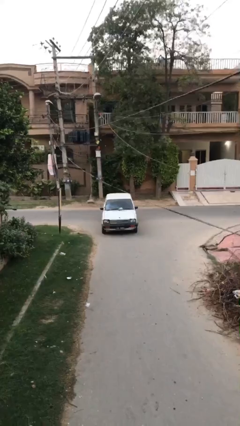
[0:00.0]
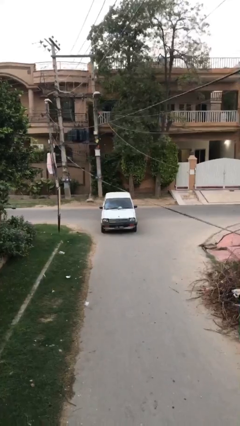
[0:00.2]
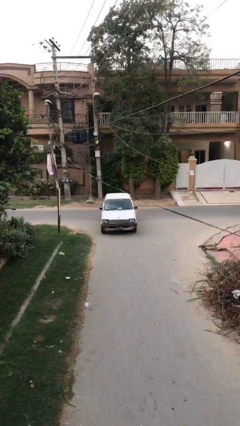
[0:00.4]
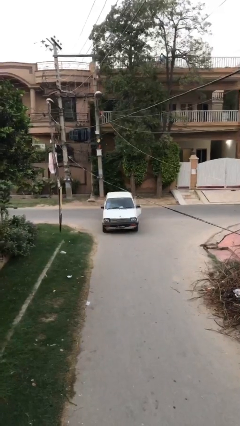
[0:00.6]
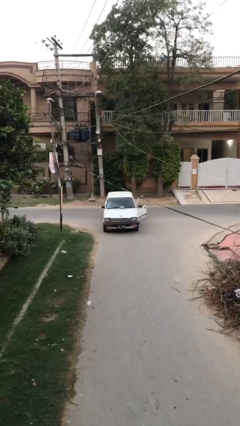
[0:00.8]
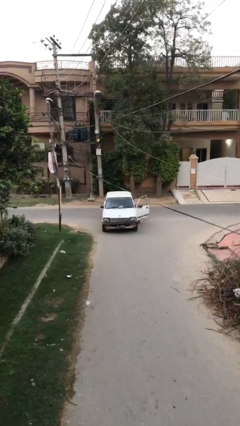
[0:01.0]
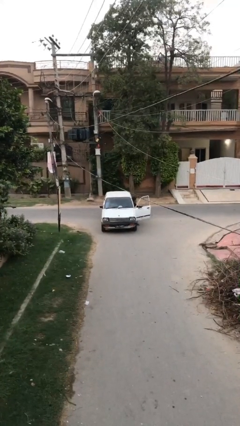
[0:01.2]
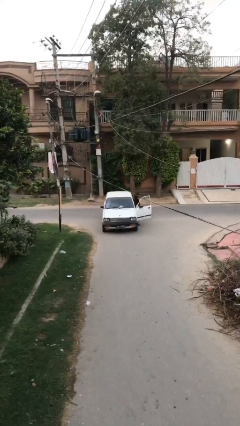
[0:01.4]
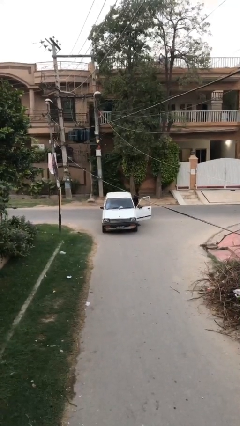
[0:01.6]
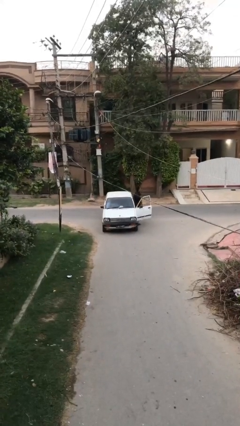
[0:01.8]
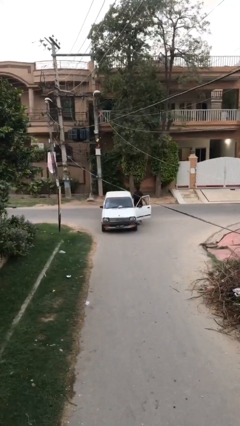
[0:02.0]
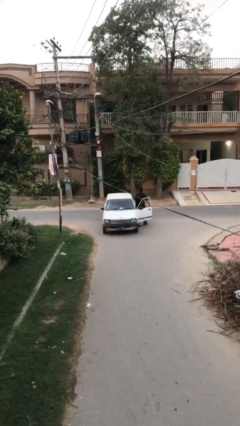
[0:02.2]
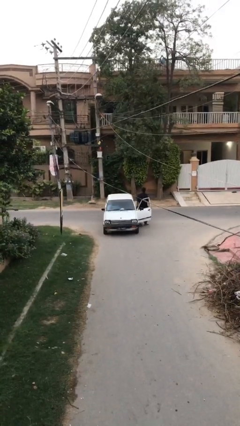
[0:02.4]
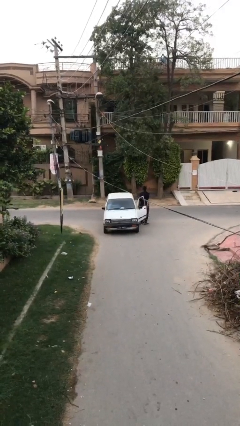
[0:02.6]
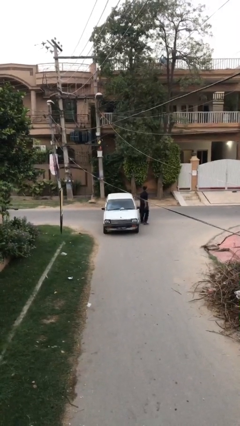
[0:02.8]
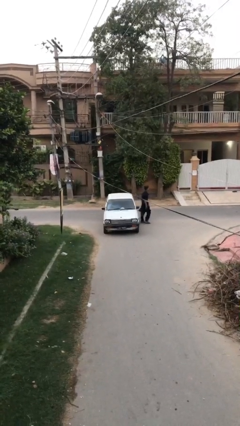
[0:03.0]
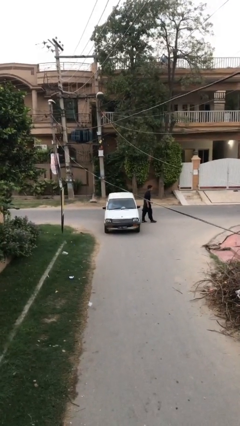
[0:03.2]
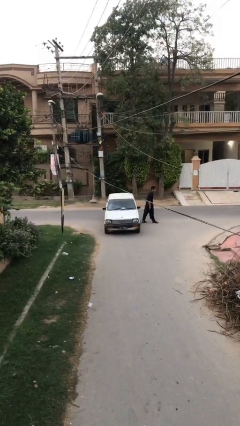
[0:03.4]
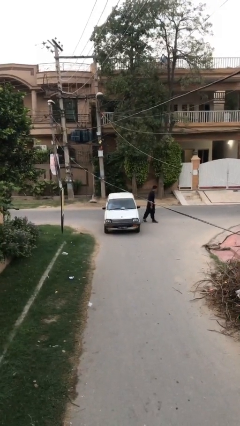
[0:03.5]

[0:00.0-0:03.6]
car drops off person

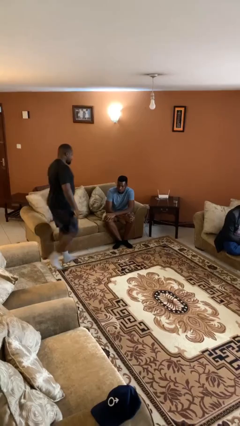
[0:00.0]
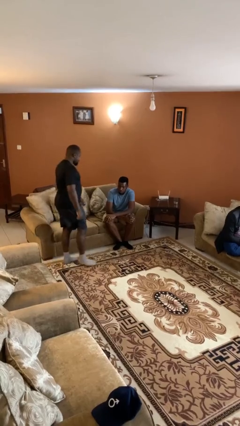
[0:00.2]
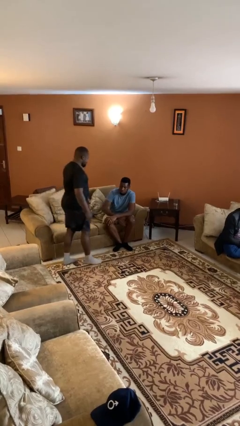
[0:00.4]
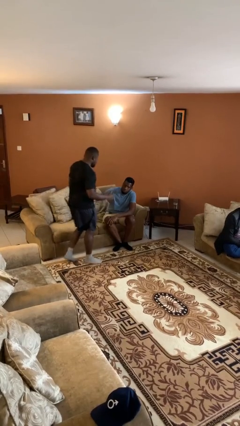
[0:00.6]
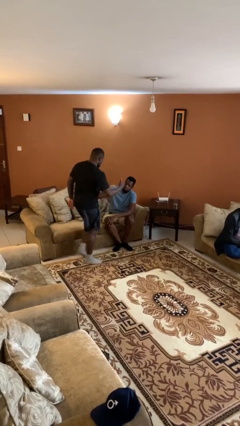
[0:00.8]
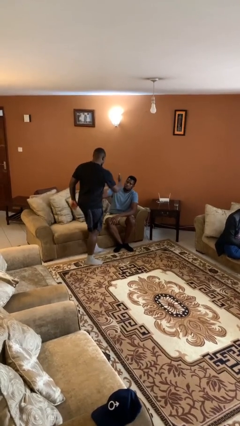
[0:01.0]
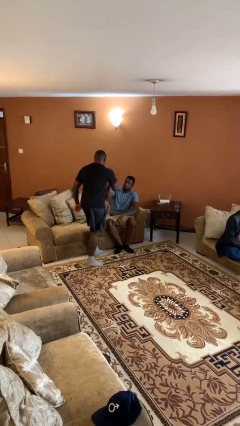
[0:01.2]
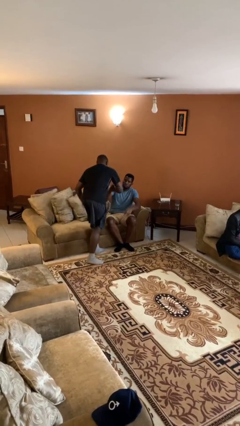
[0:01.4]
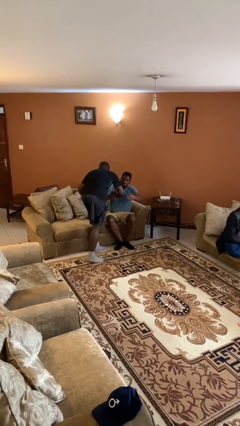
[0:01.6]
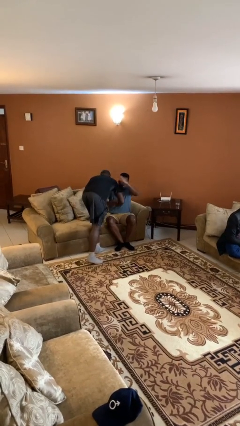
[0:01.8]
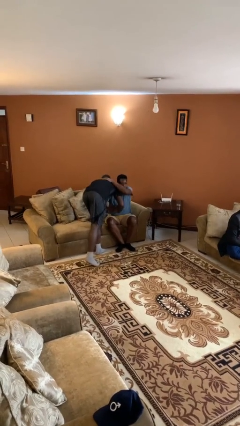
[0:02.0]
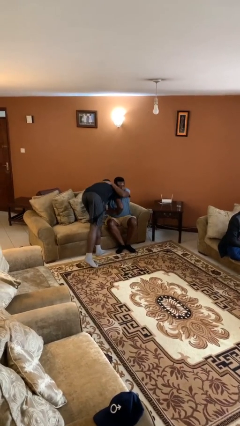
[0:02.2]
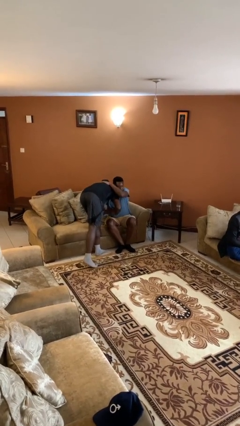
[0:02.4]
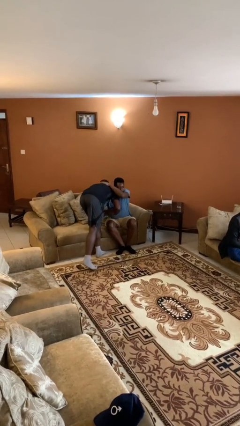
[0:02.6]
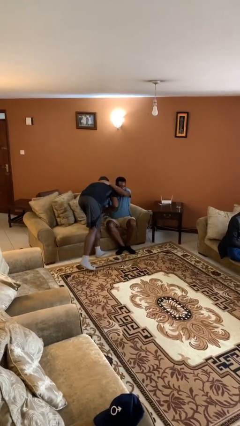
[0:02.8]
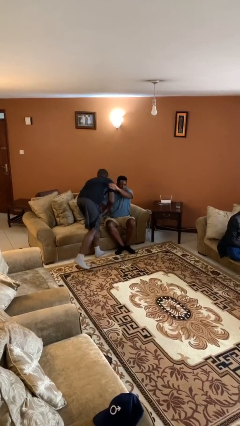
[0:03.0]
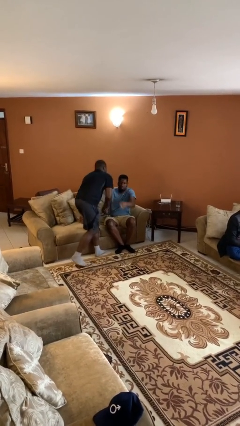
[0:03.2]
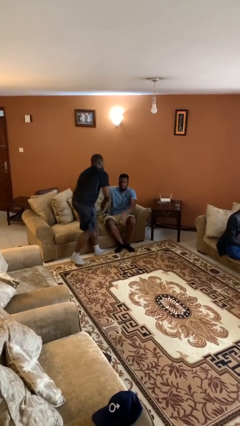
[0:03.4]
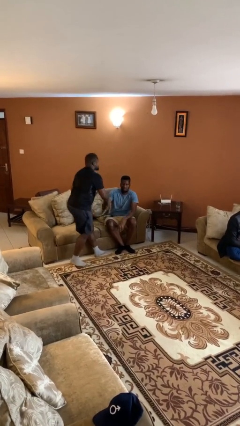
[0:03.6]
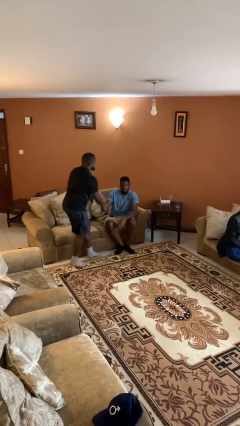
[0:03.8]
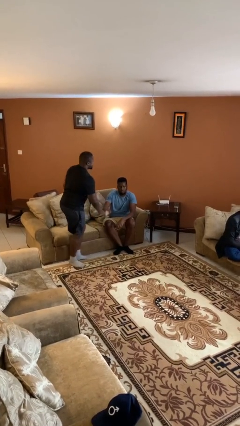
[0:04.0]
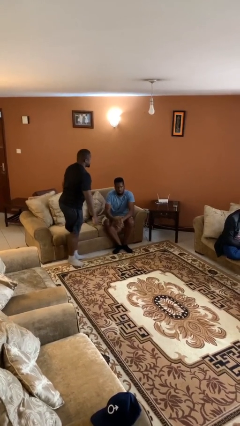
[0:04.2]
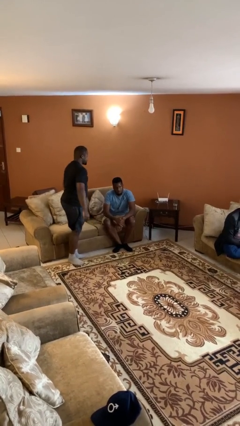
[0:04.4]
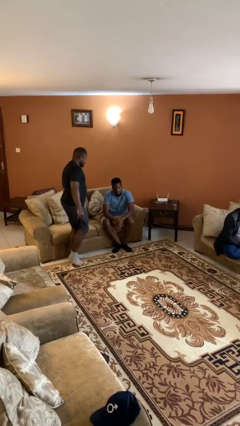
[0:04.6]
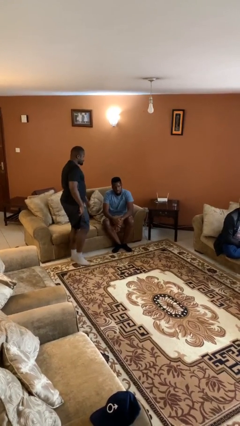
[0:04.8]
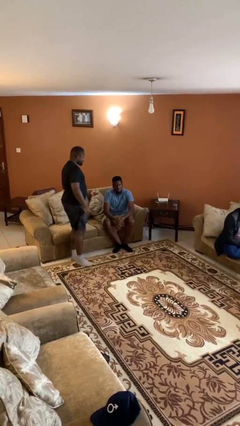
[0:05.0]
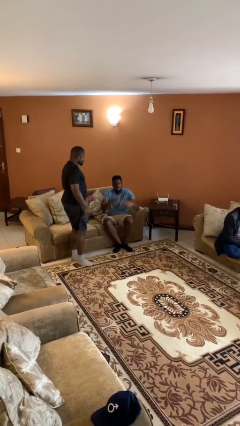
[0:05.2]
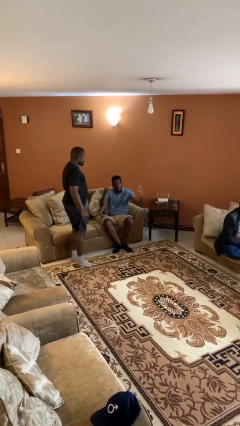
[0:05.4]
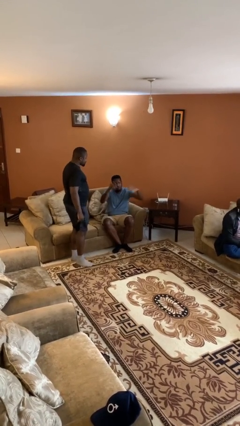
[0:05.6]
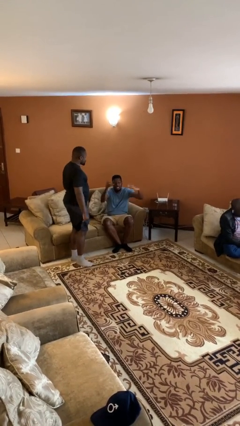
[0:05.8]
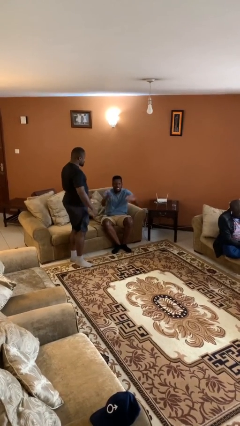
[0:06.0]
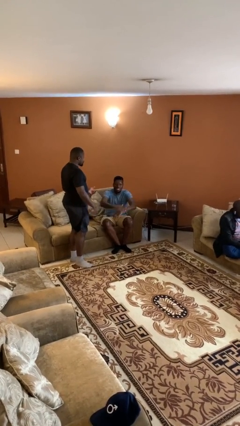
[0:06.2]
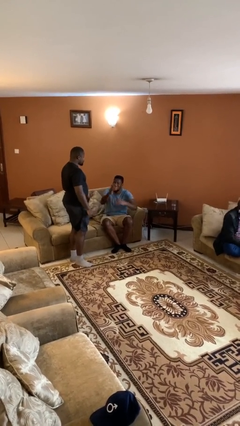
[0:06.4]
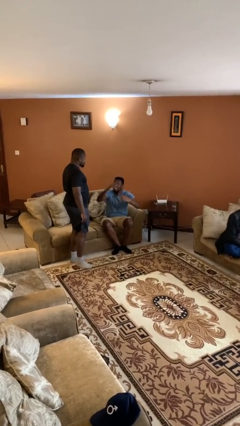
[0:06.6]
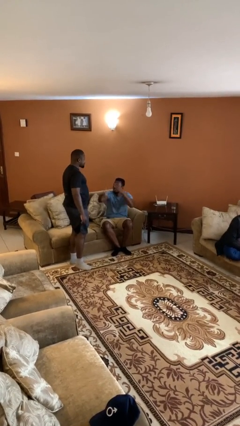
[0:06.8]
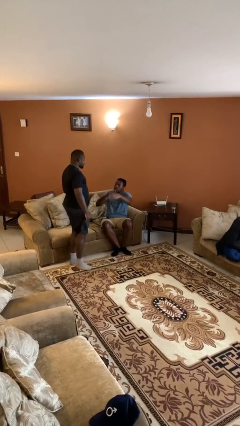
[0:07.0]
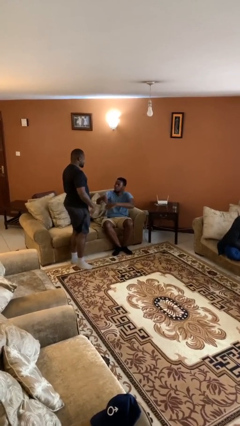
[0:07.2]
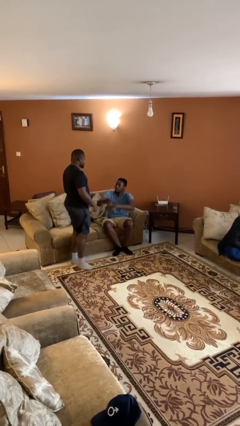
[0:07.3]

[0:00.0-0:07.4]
person embraces person

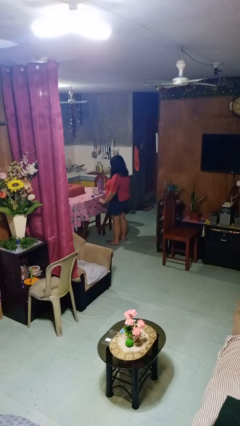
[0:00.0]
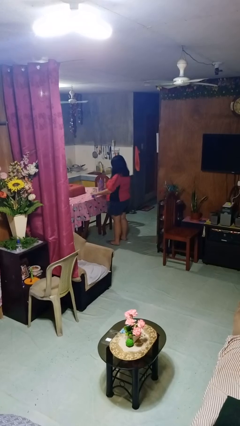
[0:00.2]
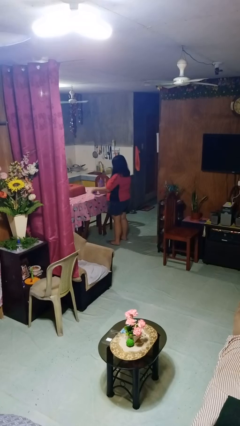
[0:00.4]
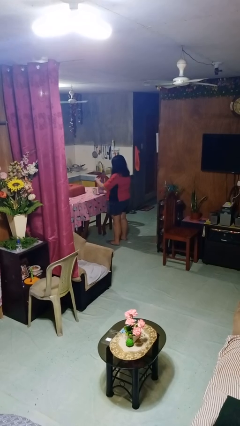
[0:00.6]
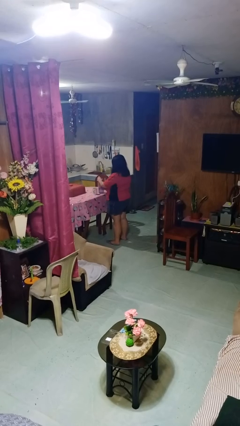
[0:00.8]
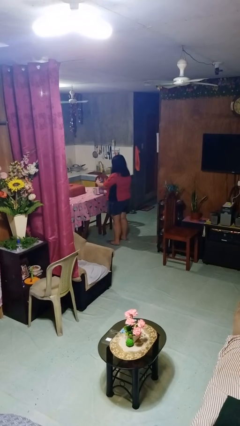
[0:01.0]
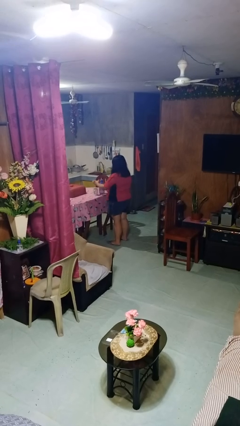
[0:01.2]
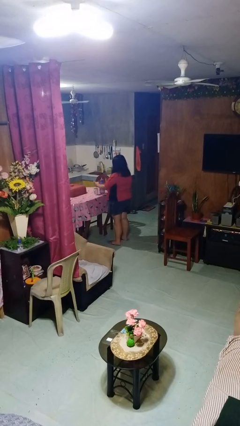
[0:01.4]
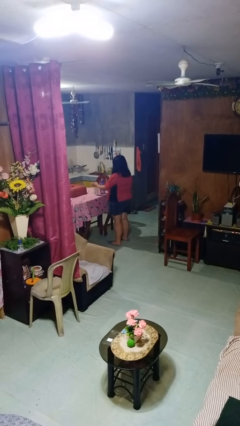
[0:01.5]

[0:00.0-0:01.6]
person screws lid to bottle

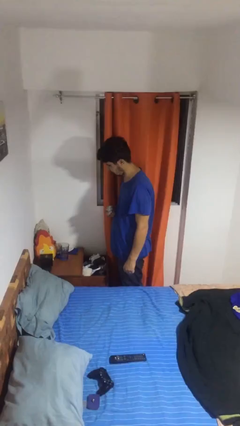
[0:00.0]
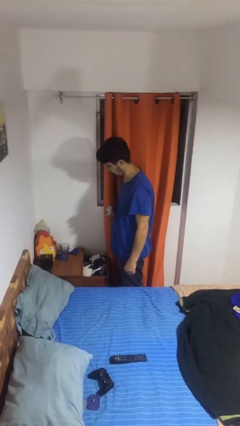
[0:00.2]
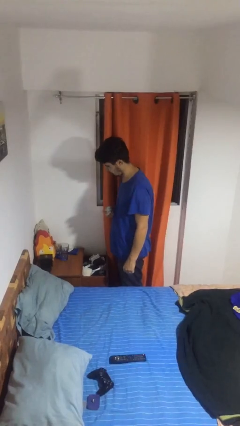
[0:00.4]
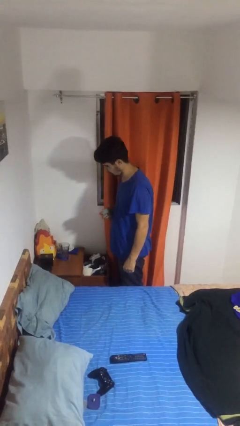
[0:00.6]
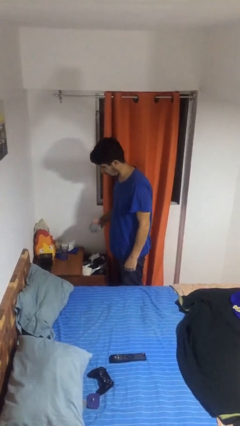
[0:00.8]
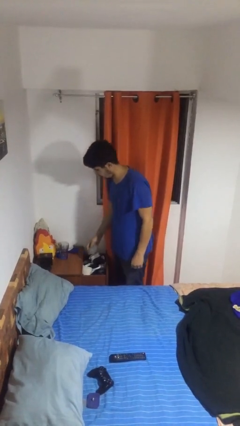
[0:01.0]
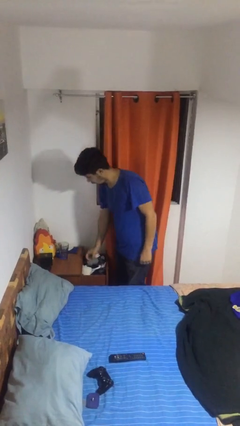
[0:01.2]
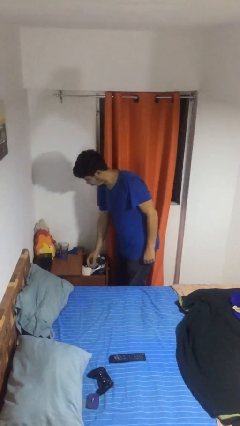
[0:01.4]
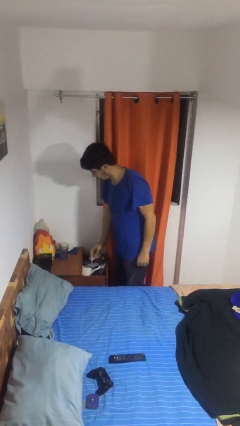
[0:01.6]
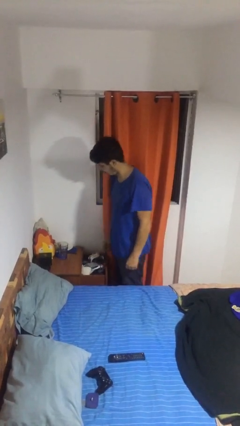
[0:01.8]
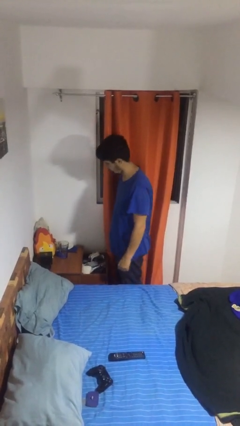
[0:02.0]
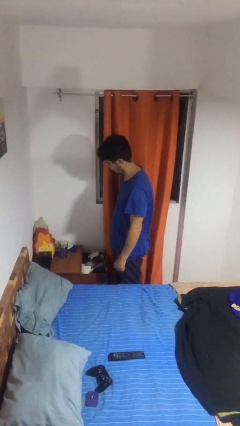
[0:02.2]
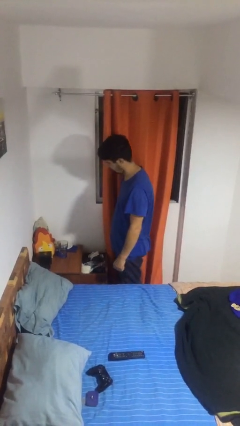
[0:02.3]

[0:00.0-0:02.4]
person puts clothes into dresser

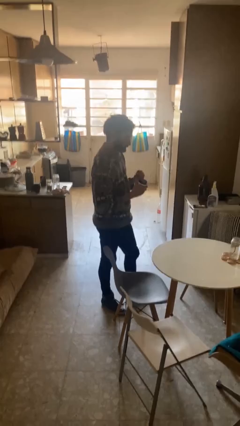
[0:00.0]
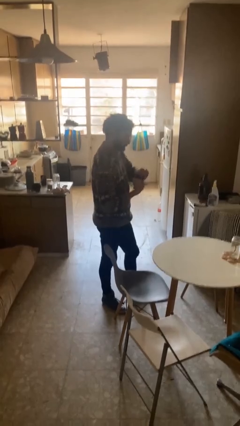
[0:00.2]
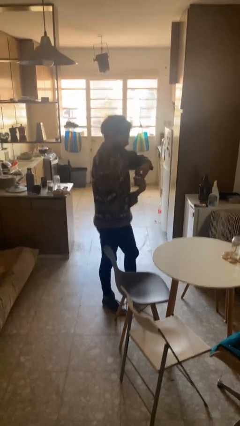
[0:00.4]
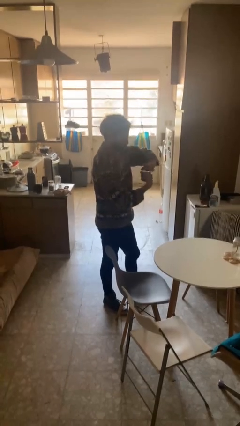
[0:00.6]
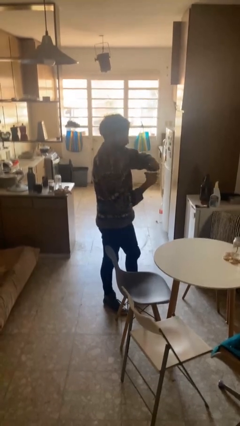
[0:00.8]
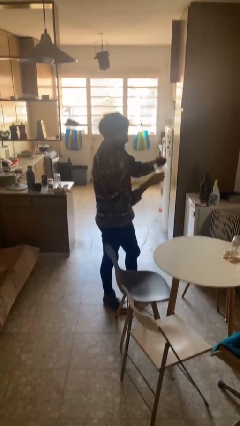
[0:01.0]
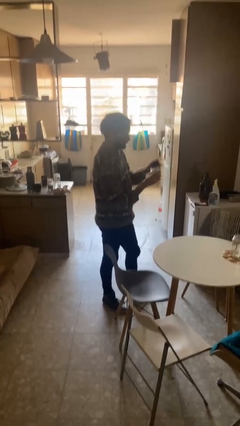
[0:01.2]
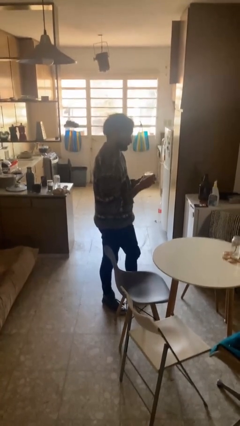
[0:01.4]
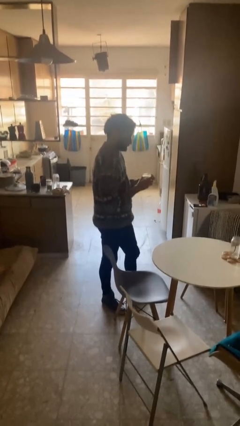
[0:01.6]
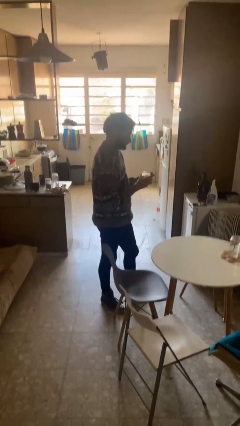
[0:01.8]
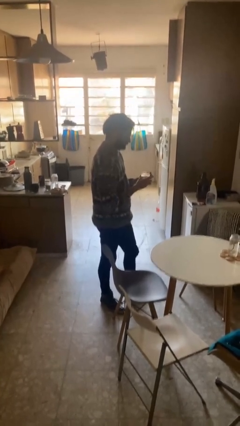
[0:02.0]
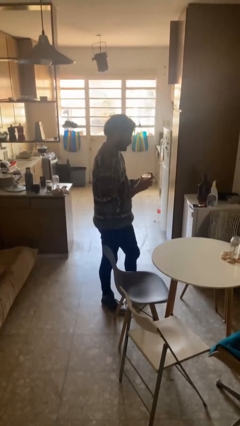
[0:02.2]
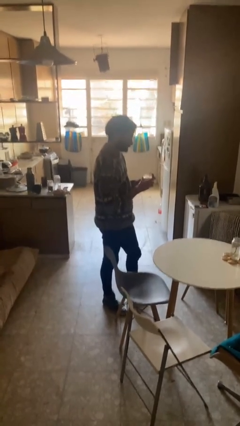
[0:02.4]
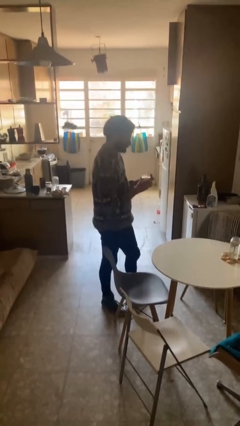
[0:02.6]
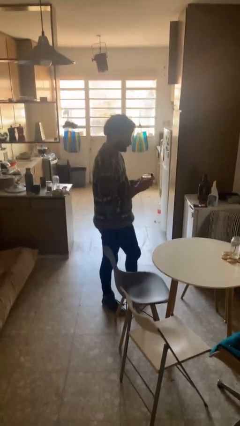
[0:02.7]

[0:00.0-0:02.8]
person opens jar

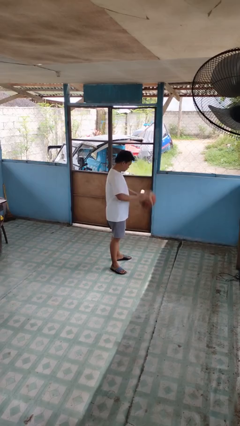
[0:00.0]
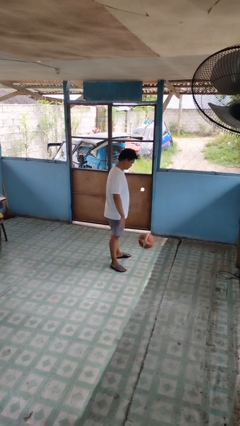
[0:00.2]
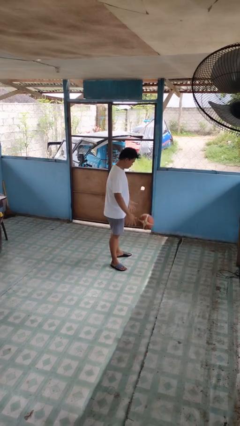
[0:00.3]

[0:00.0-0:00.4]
person bounces ball on floor
